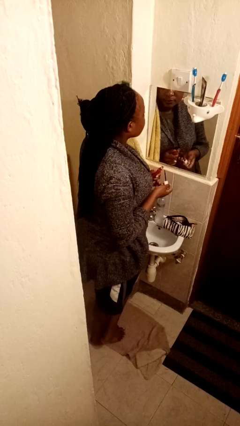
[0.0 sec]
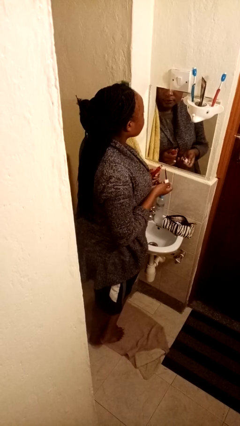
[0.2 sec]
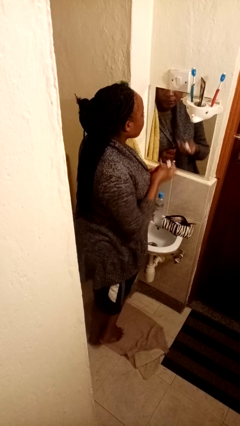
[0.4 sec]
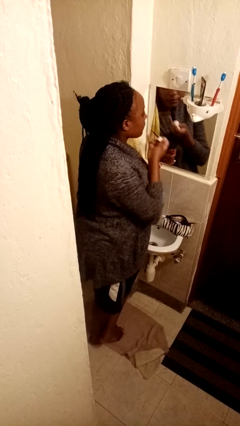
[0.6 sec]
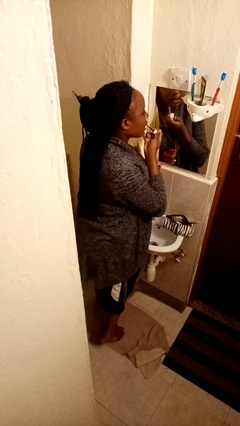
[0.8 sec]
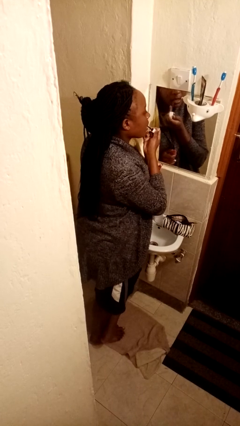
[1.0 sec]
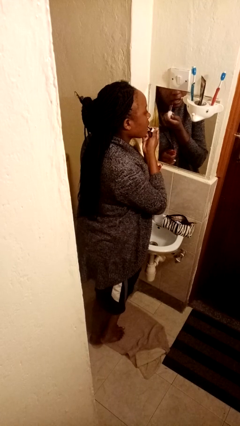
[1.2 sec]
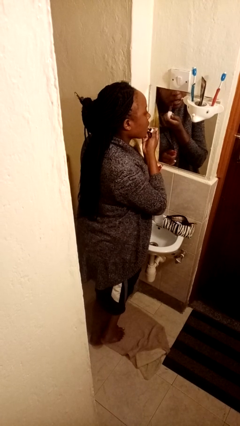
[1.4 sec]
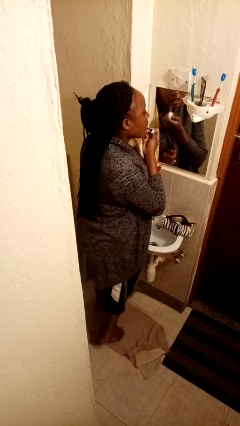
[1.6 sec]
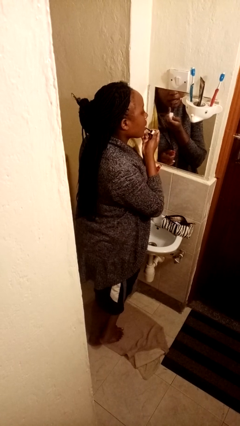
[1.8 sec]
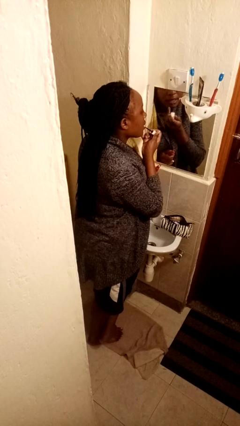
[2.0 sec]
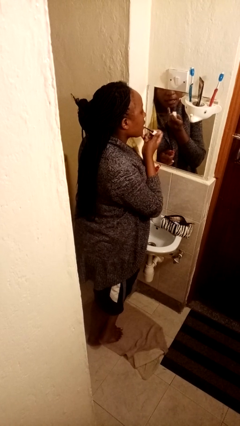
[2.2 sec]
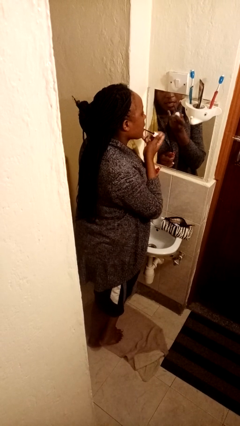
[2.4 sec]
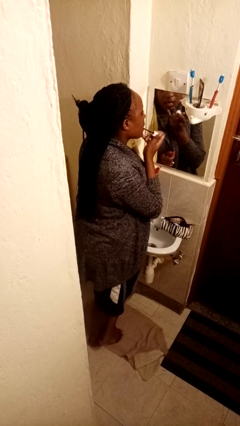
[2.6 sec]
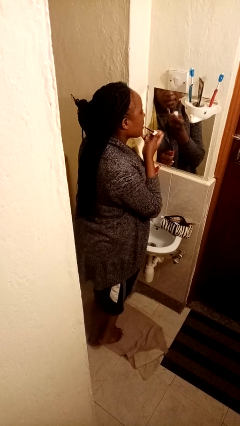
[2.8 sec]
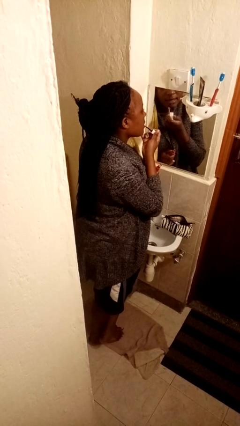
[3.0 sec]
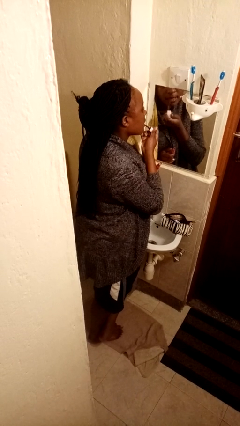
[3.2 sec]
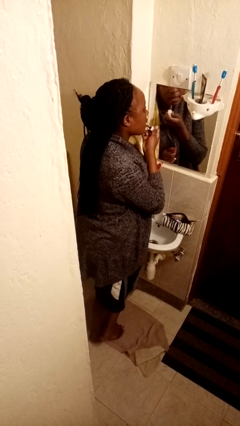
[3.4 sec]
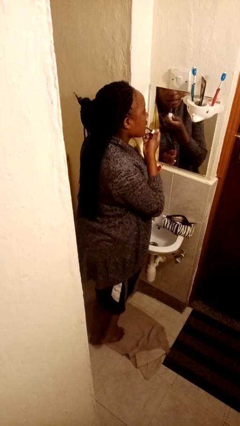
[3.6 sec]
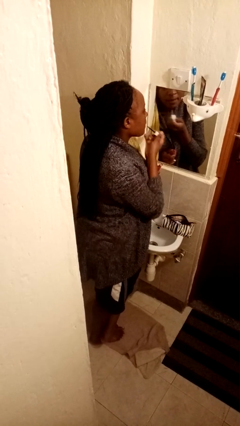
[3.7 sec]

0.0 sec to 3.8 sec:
person applies lip makeup

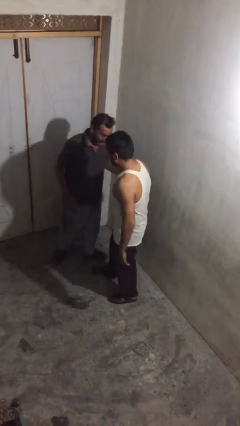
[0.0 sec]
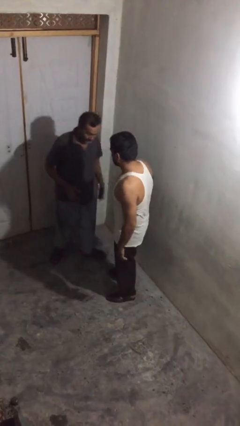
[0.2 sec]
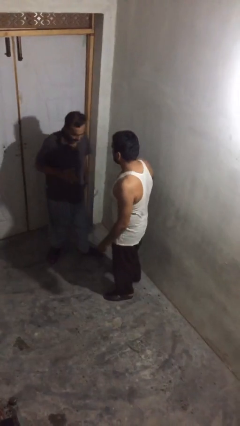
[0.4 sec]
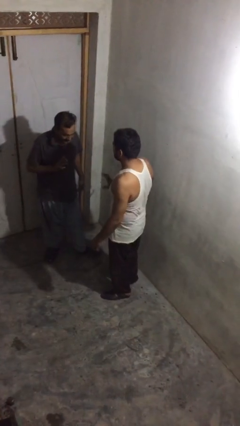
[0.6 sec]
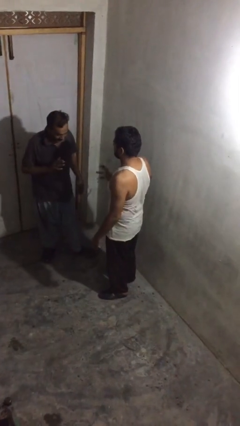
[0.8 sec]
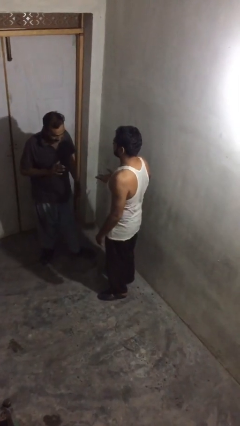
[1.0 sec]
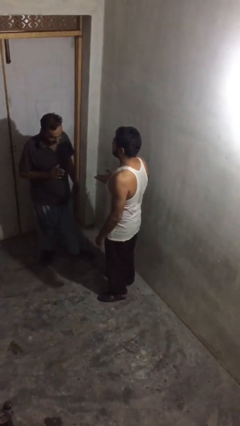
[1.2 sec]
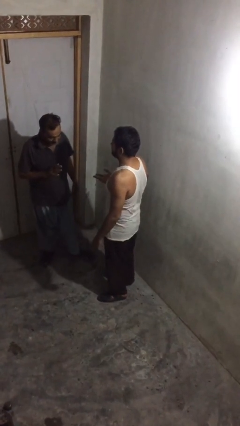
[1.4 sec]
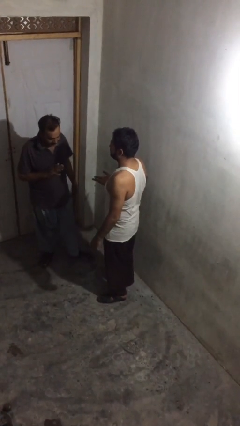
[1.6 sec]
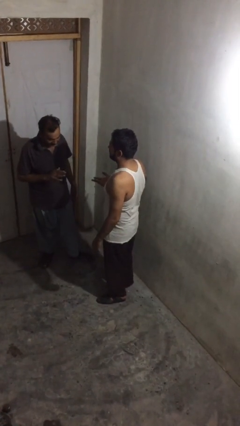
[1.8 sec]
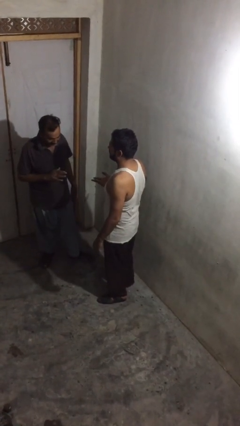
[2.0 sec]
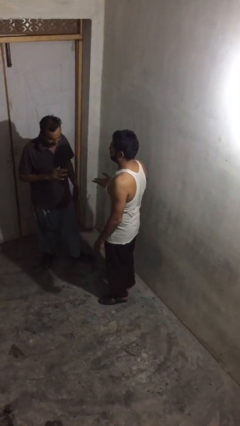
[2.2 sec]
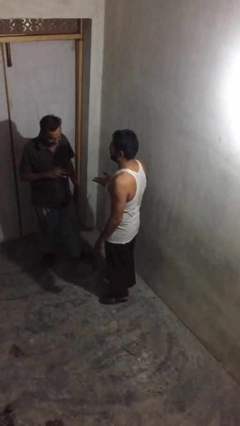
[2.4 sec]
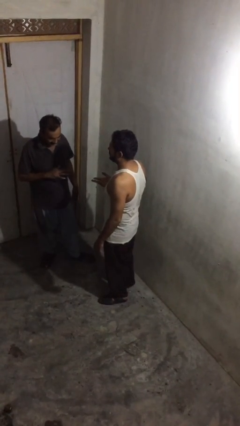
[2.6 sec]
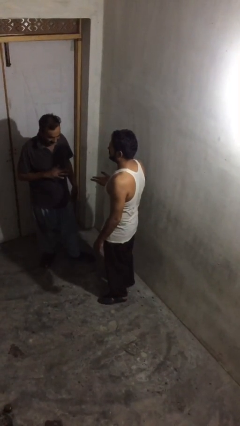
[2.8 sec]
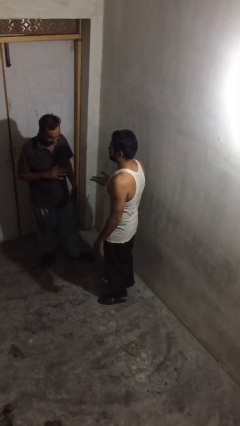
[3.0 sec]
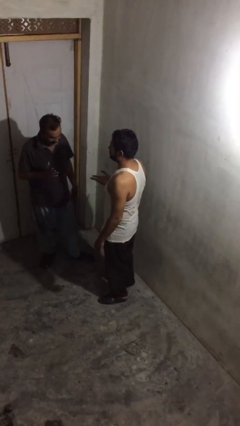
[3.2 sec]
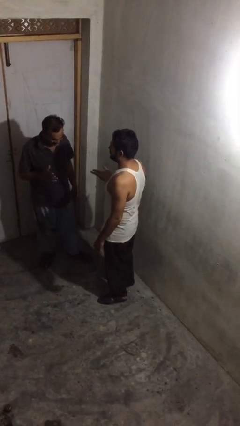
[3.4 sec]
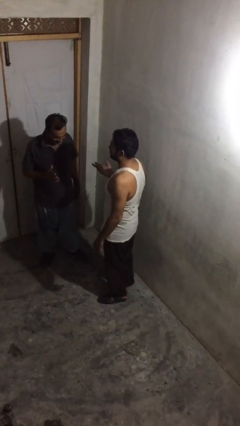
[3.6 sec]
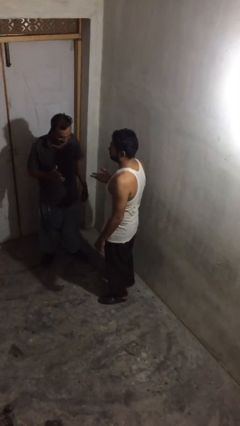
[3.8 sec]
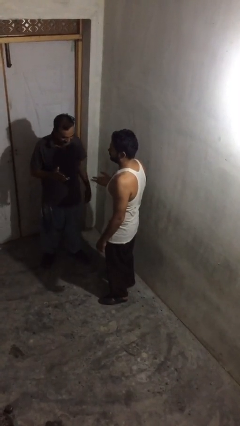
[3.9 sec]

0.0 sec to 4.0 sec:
person talks to person

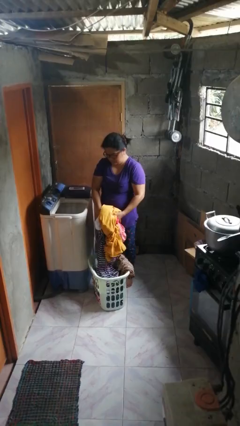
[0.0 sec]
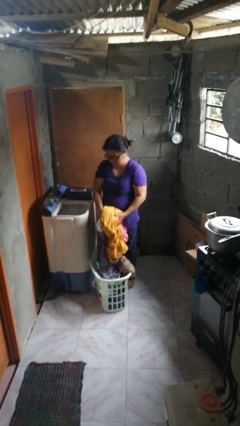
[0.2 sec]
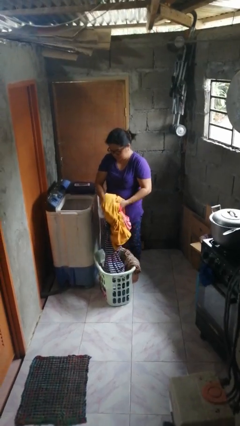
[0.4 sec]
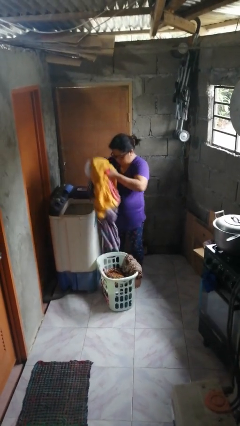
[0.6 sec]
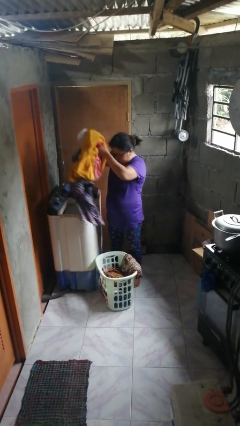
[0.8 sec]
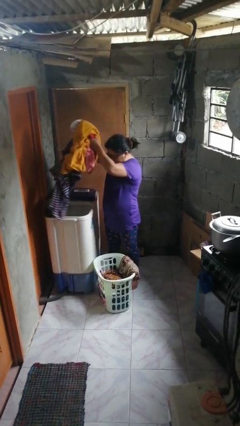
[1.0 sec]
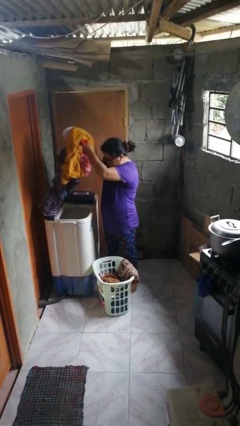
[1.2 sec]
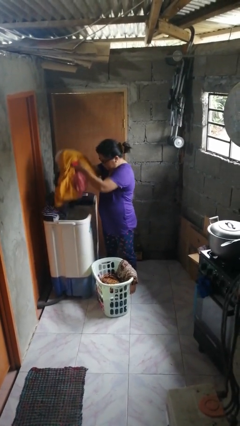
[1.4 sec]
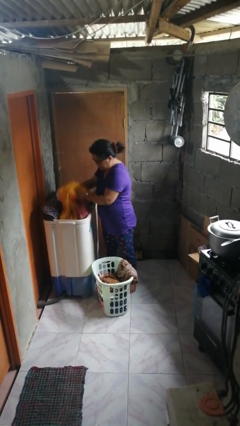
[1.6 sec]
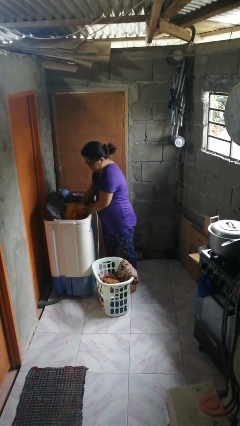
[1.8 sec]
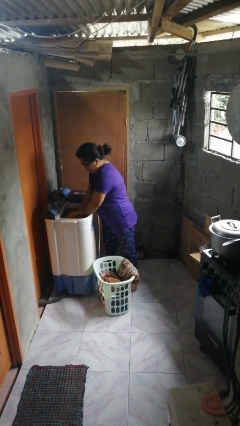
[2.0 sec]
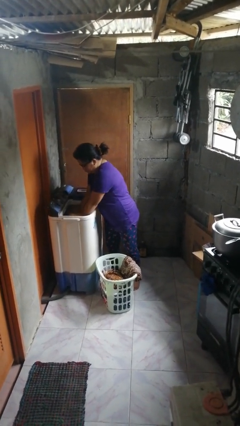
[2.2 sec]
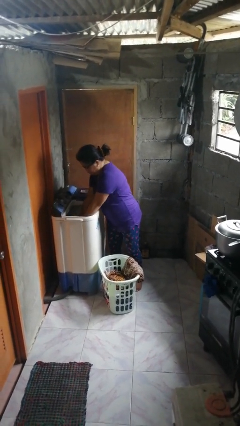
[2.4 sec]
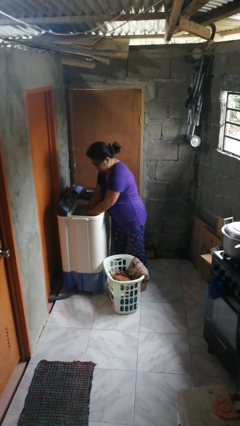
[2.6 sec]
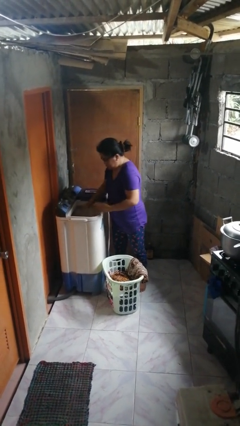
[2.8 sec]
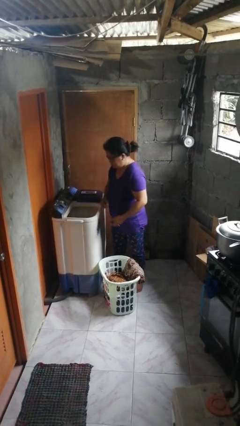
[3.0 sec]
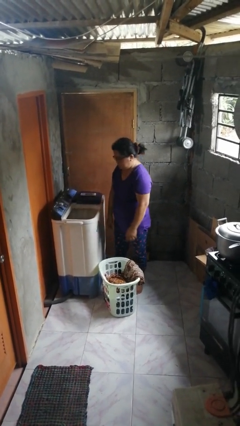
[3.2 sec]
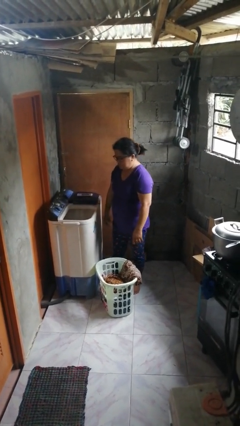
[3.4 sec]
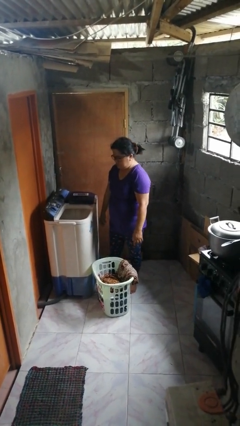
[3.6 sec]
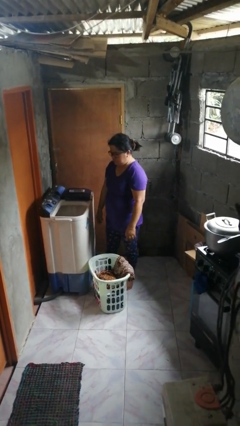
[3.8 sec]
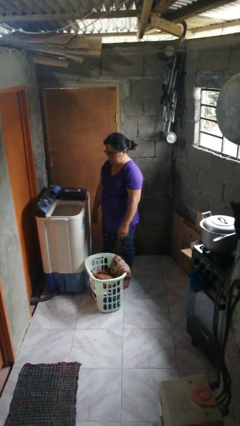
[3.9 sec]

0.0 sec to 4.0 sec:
person loads clotheswasher

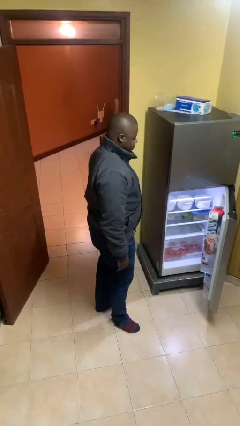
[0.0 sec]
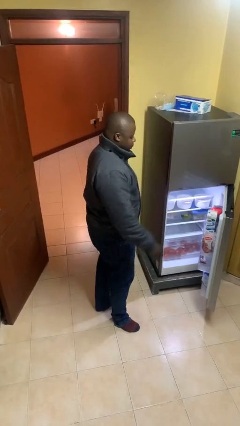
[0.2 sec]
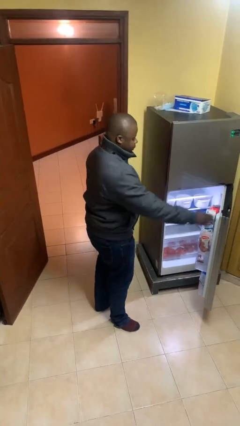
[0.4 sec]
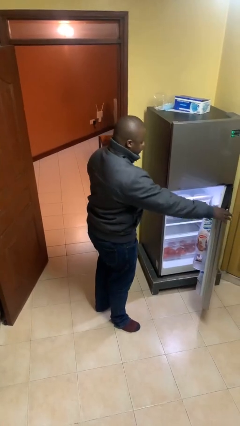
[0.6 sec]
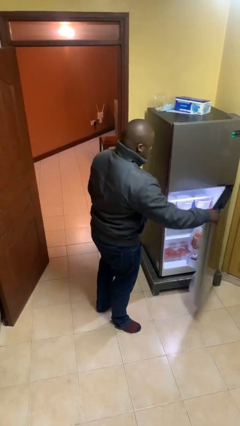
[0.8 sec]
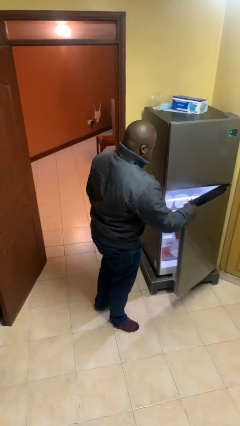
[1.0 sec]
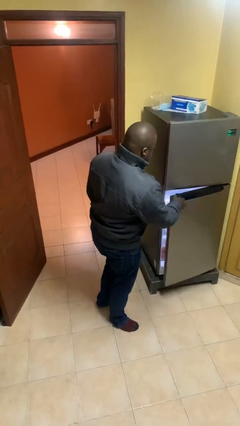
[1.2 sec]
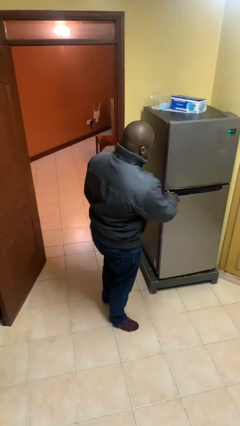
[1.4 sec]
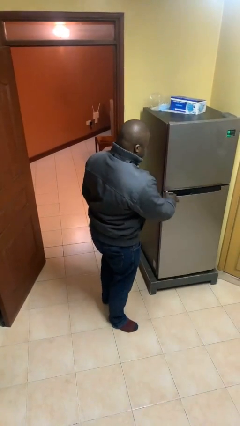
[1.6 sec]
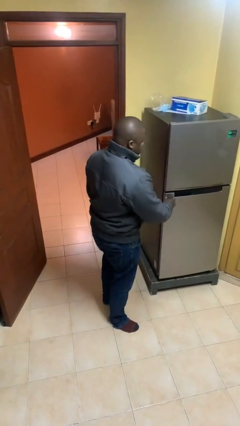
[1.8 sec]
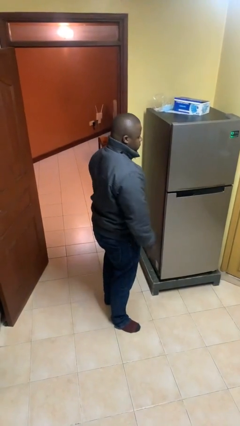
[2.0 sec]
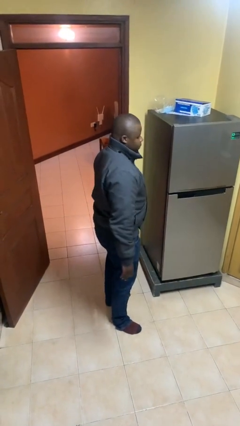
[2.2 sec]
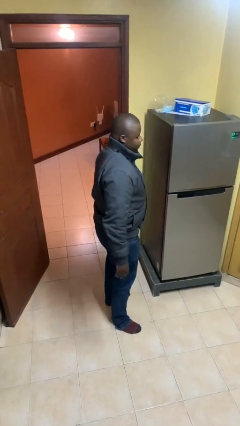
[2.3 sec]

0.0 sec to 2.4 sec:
person closes refrigerator

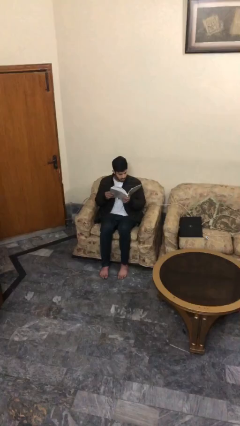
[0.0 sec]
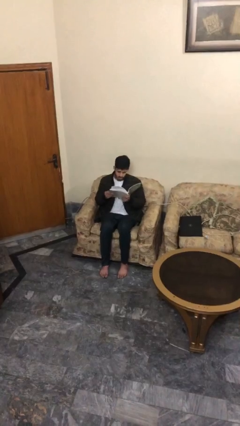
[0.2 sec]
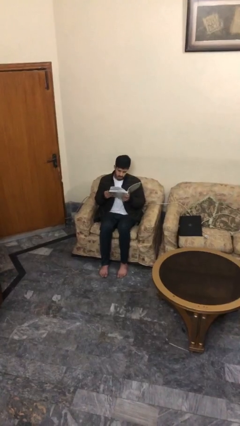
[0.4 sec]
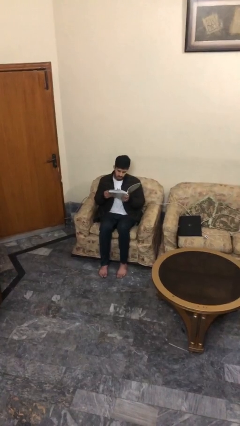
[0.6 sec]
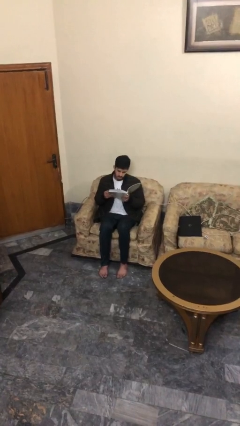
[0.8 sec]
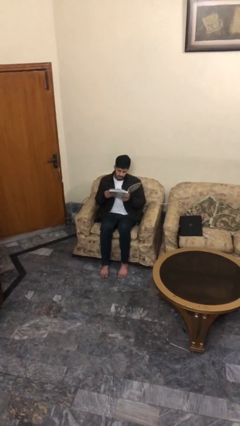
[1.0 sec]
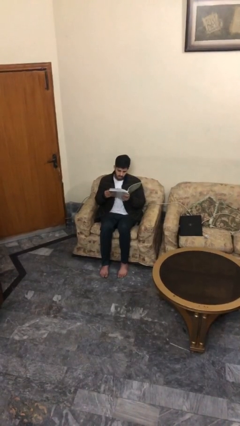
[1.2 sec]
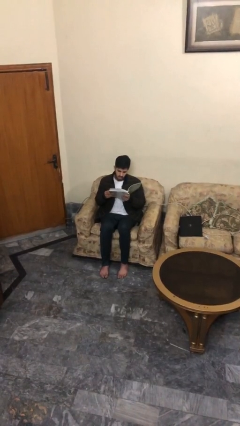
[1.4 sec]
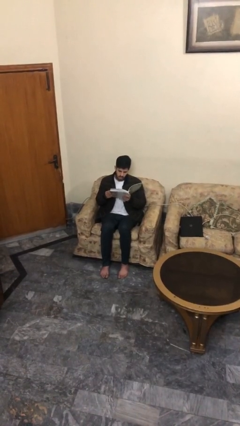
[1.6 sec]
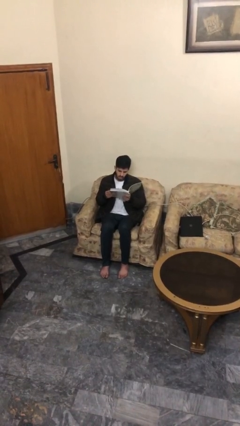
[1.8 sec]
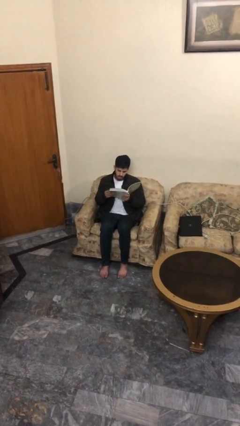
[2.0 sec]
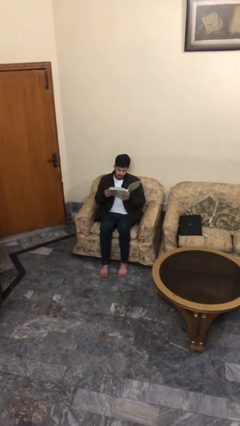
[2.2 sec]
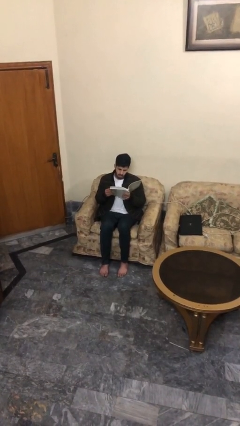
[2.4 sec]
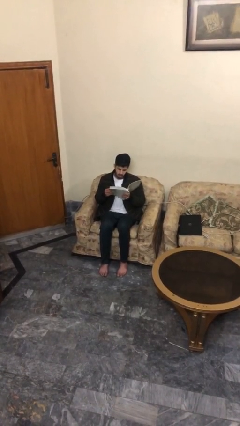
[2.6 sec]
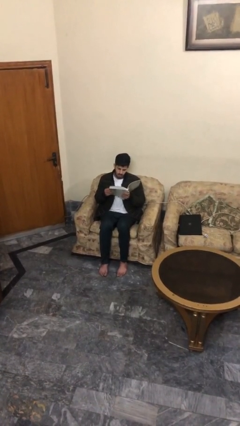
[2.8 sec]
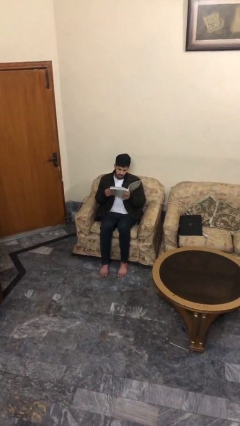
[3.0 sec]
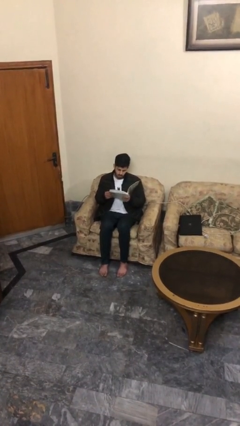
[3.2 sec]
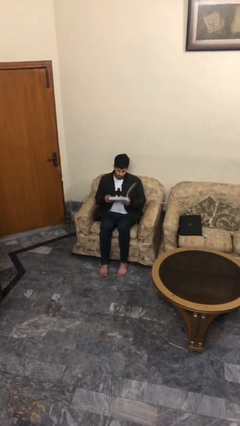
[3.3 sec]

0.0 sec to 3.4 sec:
person reads document
